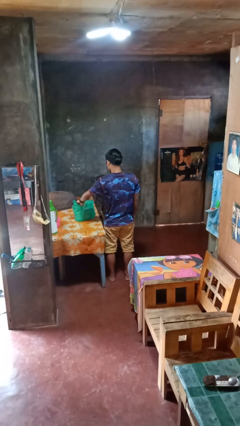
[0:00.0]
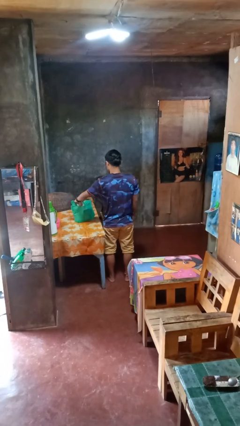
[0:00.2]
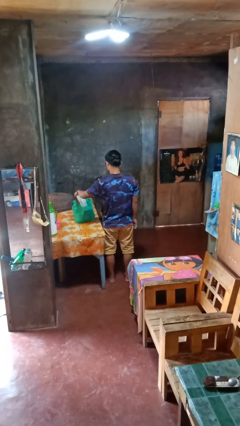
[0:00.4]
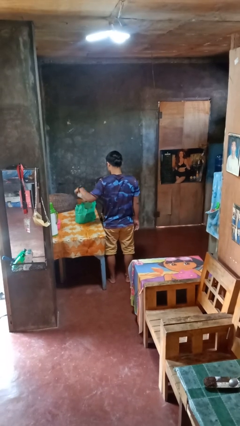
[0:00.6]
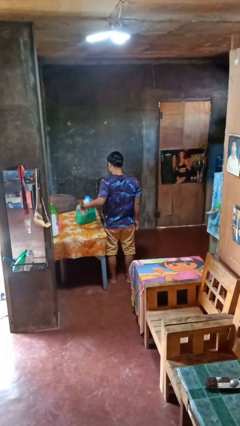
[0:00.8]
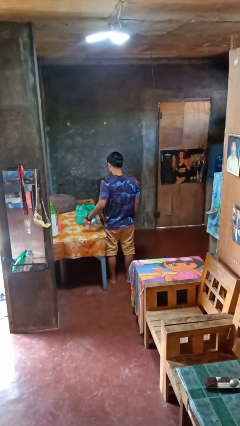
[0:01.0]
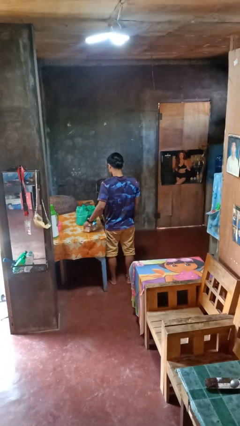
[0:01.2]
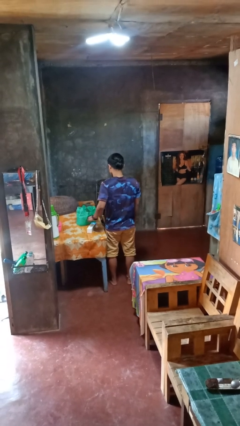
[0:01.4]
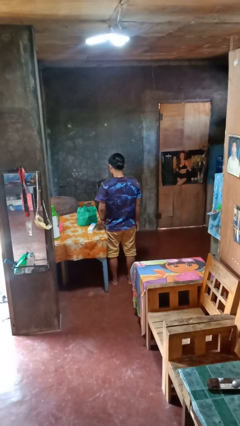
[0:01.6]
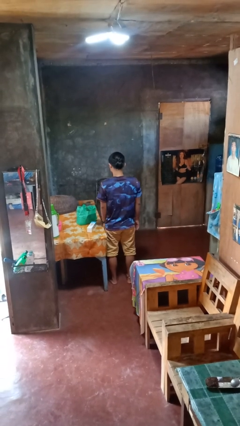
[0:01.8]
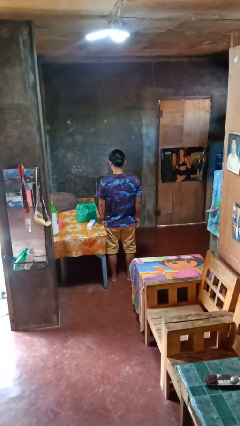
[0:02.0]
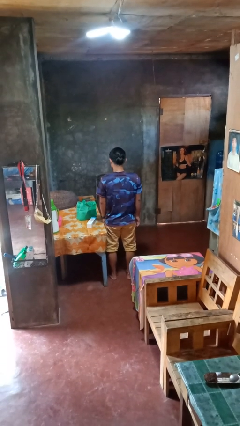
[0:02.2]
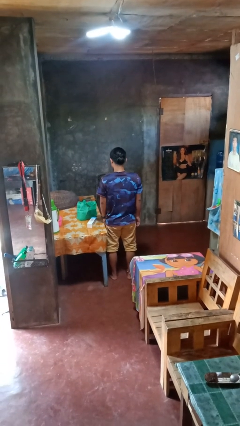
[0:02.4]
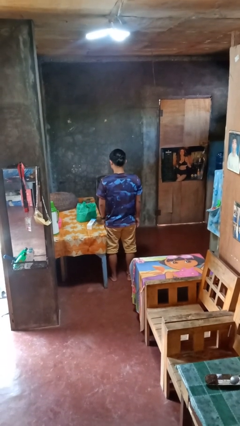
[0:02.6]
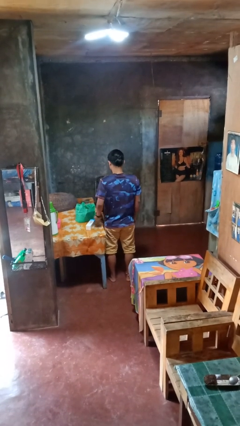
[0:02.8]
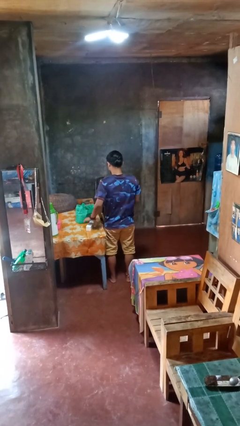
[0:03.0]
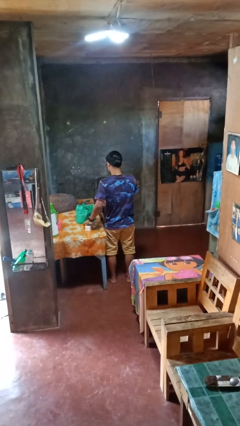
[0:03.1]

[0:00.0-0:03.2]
person takes object from bag

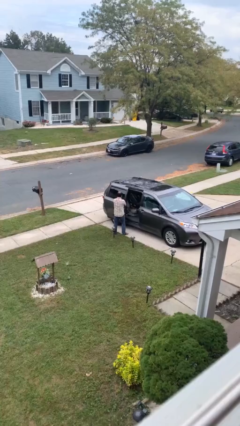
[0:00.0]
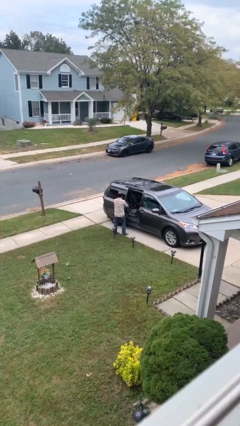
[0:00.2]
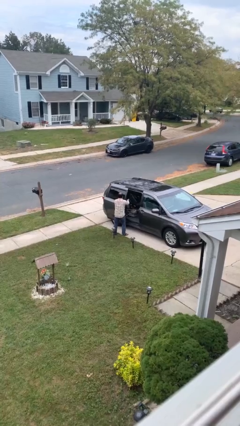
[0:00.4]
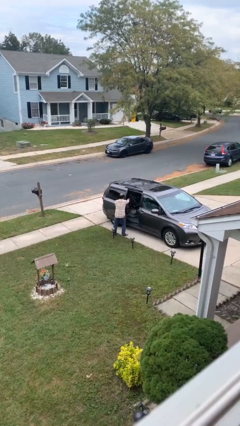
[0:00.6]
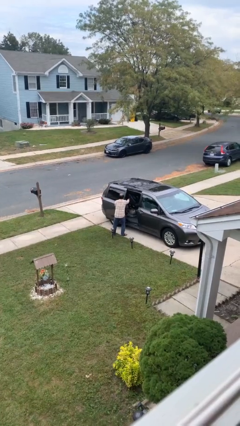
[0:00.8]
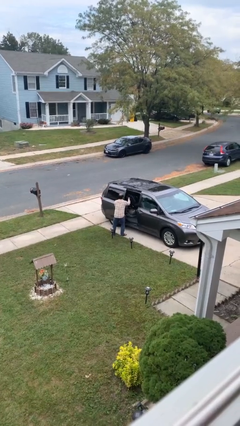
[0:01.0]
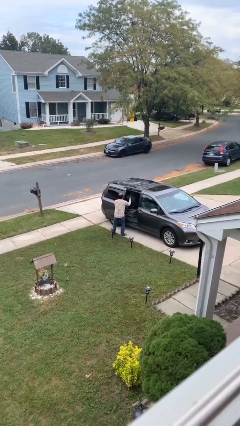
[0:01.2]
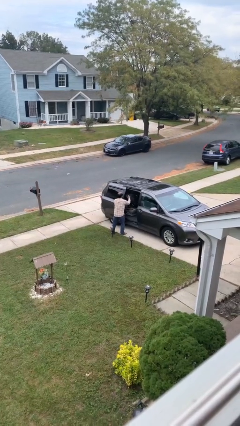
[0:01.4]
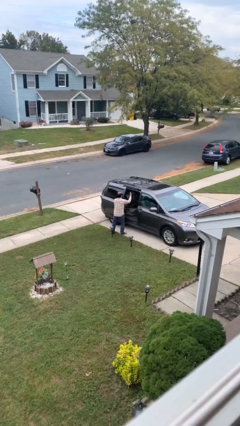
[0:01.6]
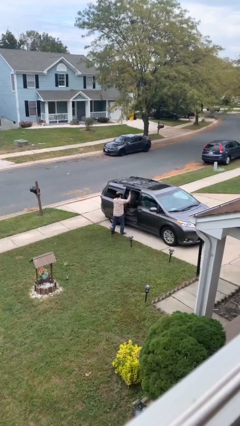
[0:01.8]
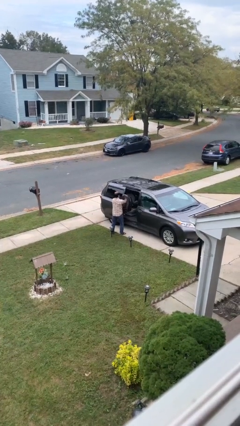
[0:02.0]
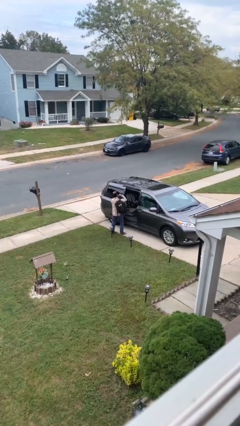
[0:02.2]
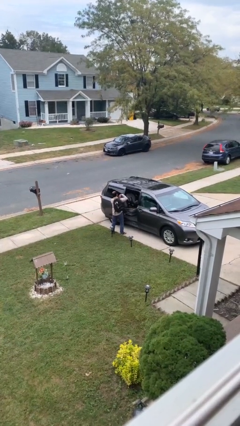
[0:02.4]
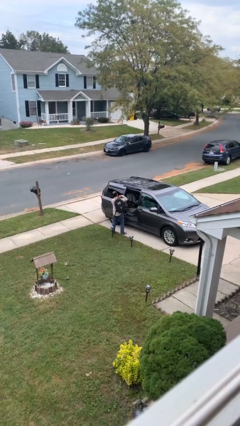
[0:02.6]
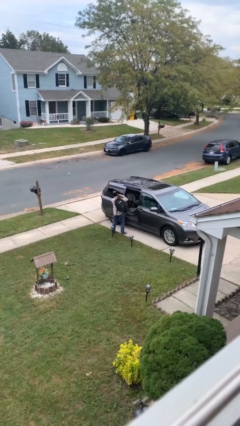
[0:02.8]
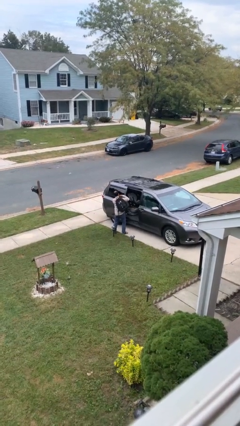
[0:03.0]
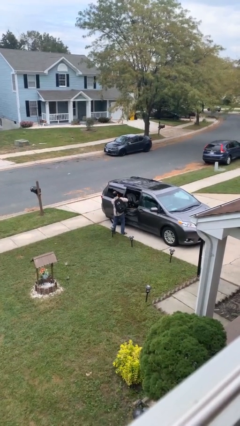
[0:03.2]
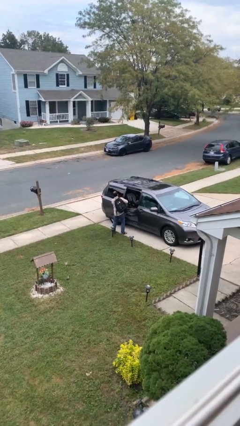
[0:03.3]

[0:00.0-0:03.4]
person unloads car

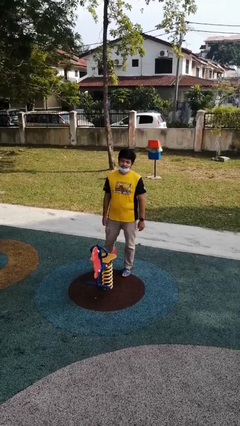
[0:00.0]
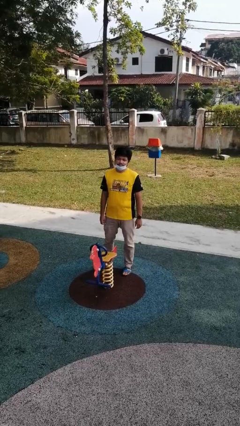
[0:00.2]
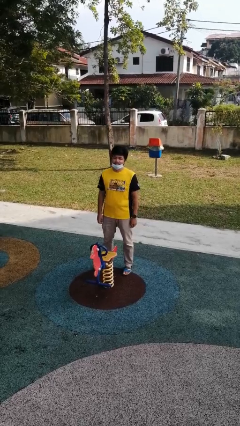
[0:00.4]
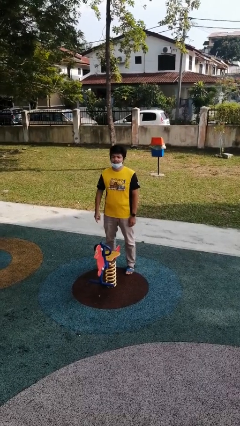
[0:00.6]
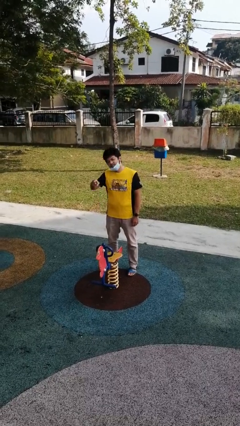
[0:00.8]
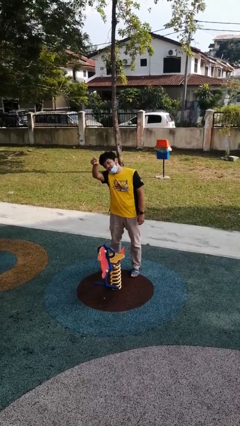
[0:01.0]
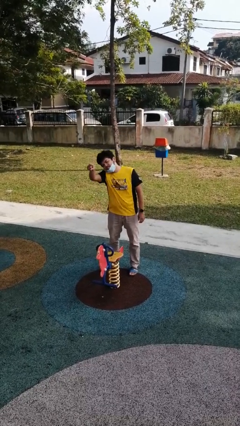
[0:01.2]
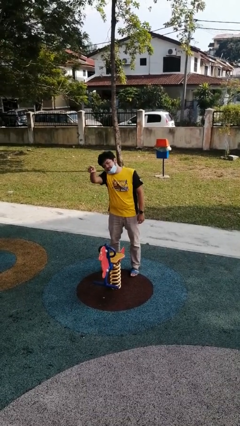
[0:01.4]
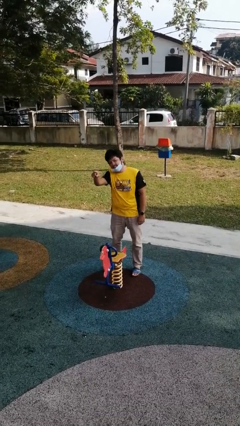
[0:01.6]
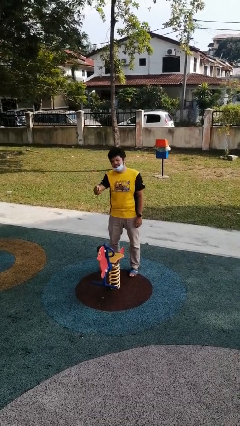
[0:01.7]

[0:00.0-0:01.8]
person points at person

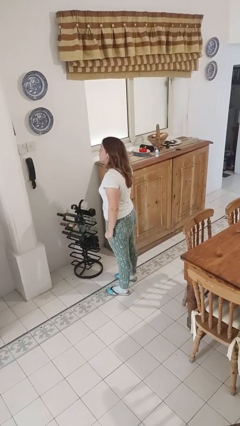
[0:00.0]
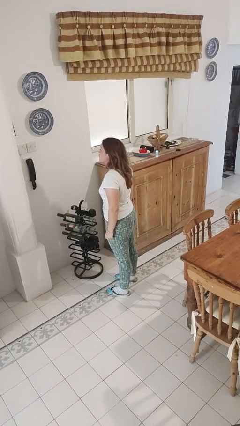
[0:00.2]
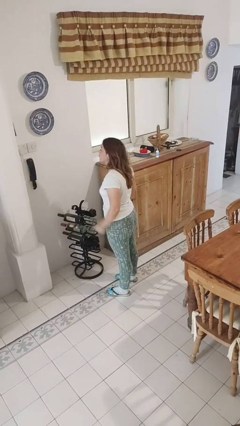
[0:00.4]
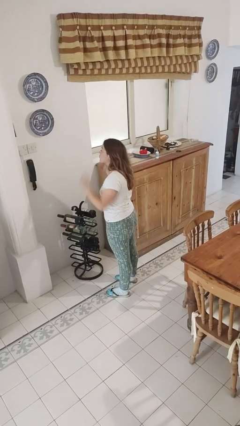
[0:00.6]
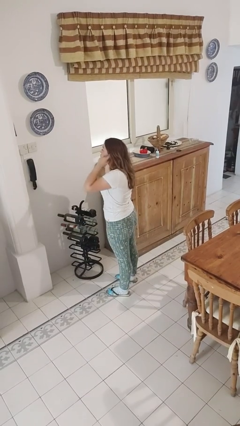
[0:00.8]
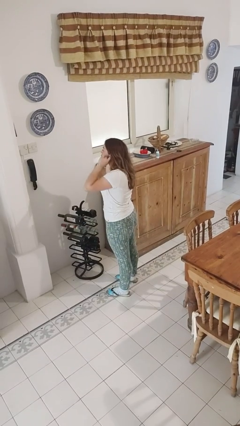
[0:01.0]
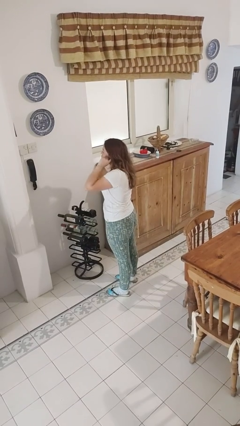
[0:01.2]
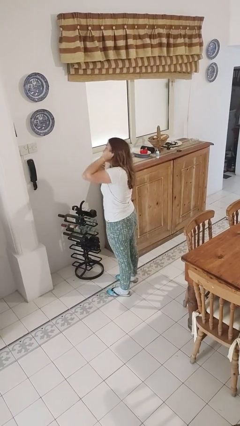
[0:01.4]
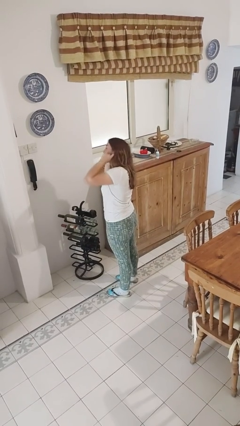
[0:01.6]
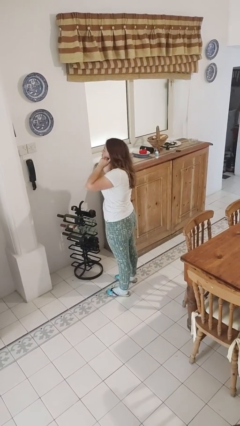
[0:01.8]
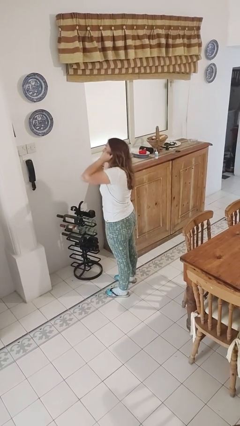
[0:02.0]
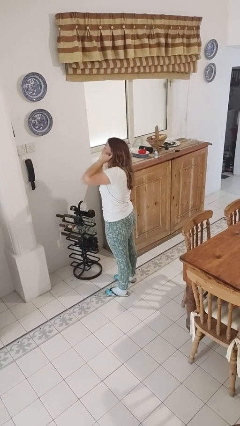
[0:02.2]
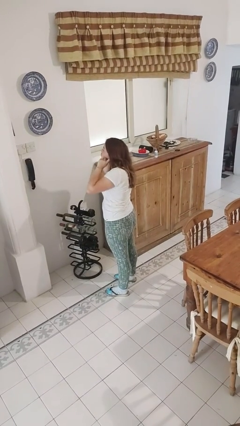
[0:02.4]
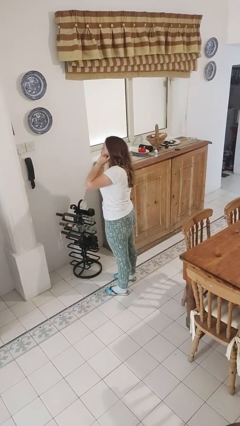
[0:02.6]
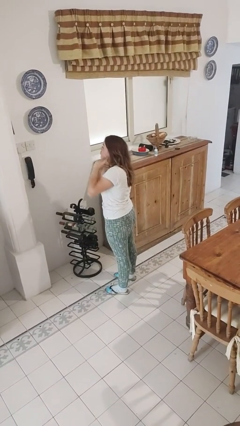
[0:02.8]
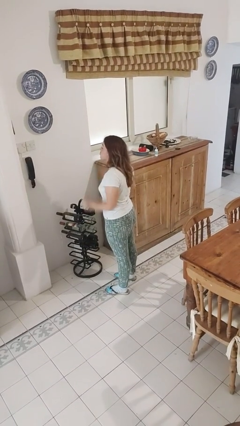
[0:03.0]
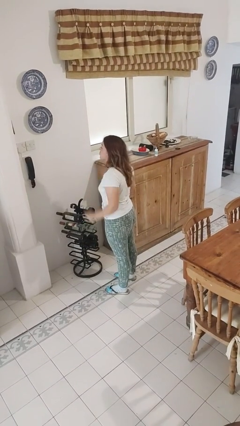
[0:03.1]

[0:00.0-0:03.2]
person puts fingers in ear

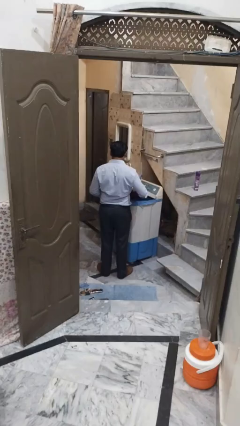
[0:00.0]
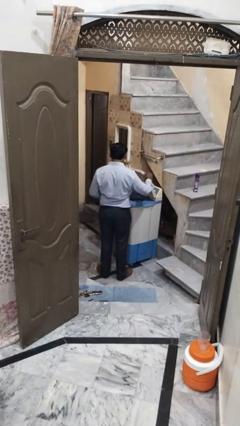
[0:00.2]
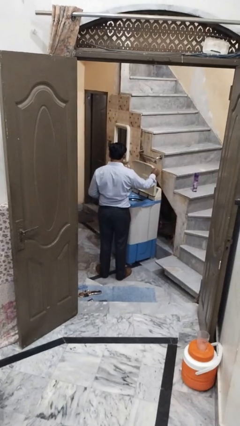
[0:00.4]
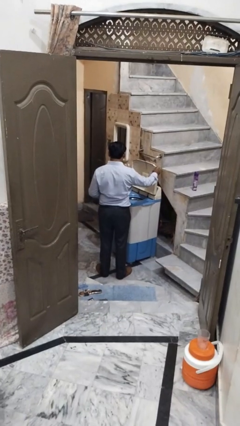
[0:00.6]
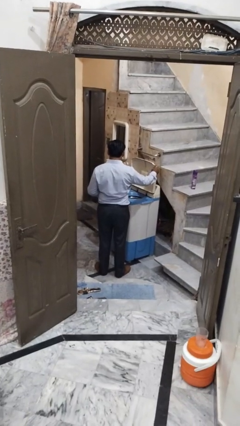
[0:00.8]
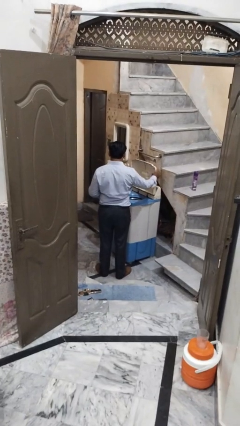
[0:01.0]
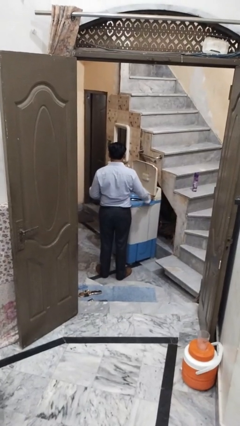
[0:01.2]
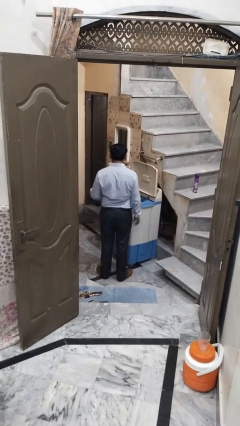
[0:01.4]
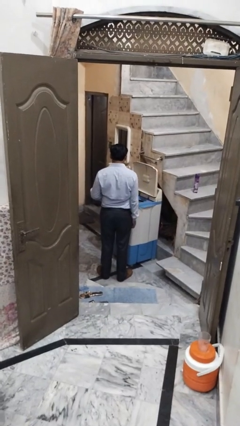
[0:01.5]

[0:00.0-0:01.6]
person opens clothes washer

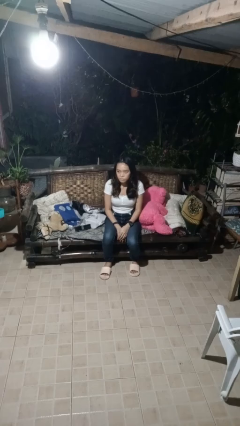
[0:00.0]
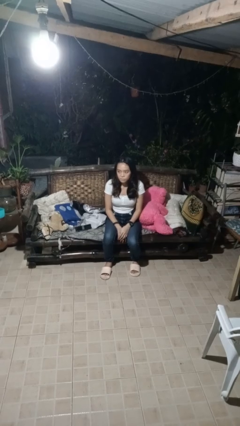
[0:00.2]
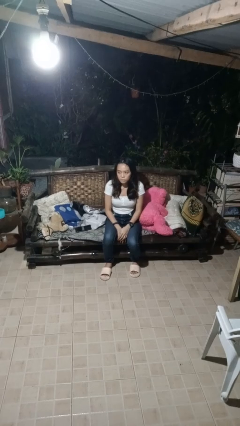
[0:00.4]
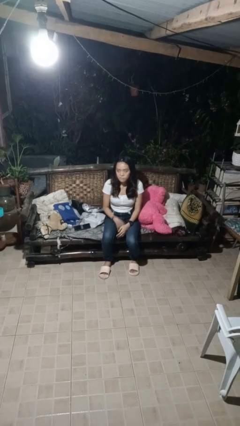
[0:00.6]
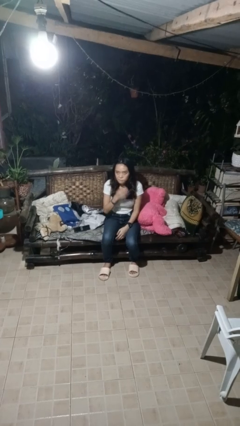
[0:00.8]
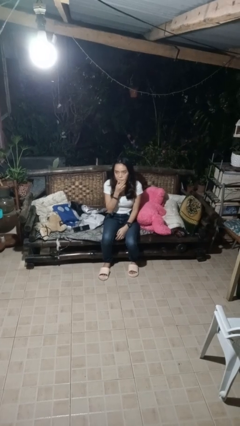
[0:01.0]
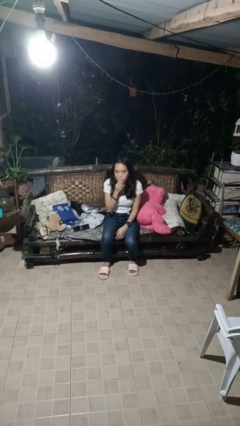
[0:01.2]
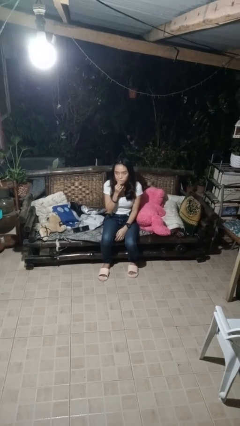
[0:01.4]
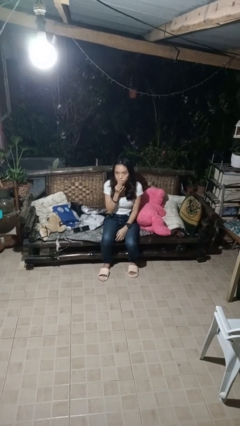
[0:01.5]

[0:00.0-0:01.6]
person strokes chin

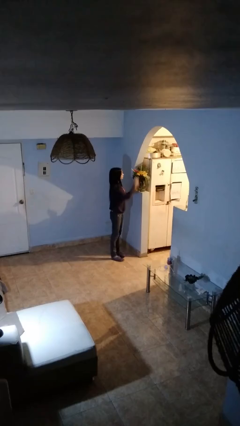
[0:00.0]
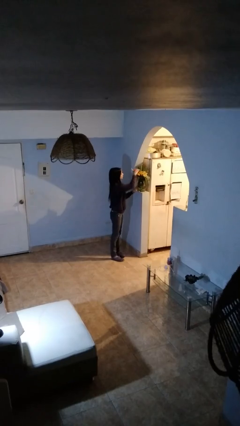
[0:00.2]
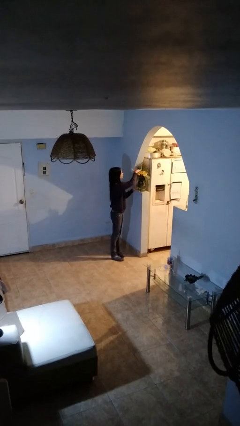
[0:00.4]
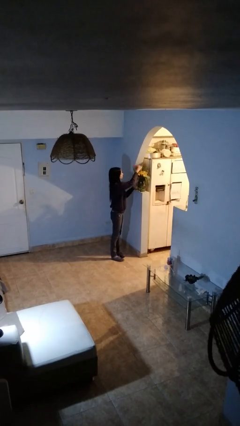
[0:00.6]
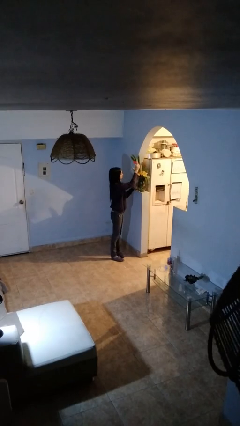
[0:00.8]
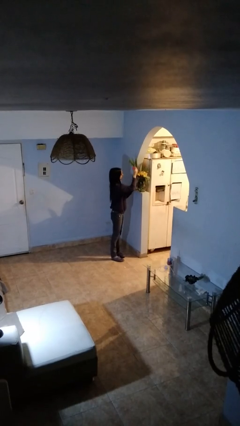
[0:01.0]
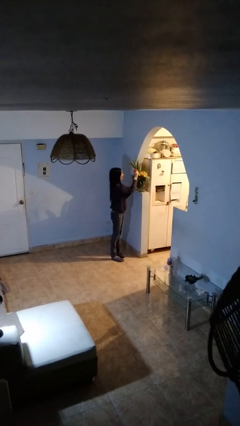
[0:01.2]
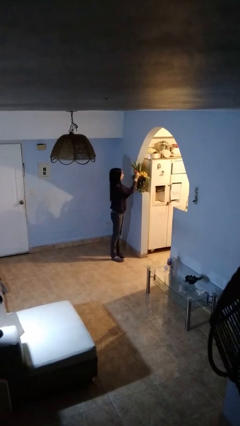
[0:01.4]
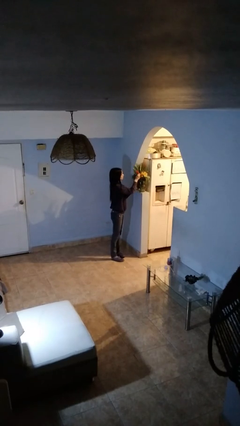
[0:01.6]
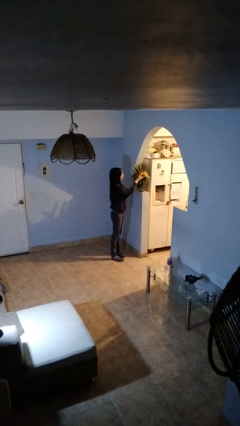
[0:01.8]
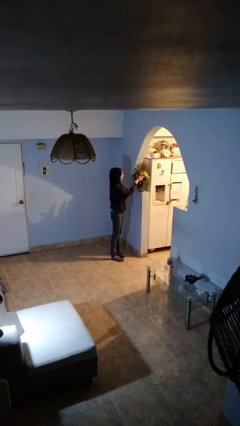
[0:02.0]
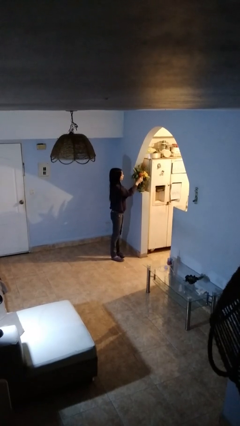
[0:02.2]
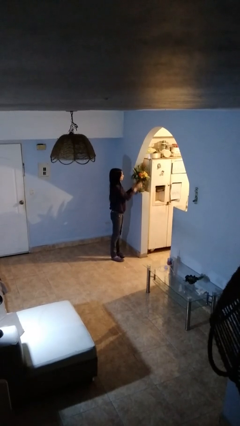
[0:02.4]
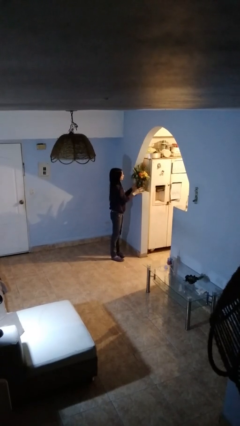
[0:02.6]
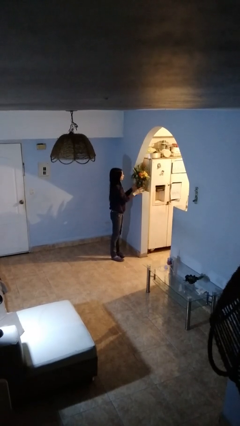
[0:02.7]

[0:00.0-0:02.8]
person arranges flowers in vase
